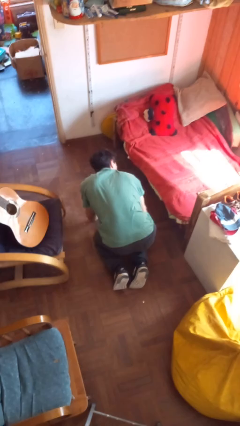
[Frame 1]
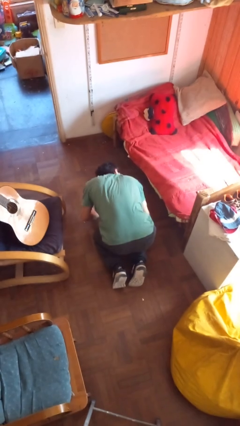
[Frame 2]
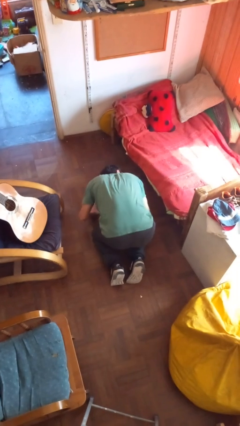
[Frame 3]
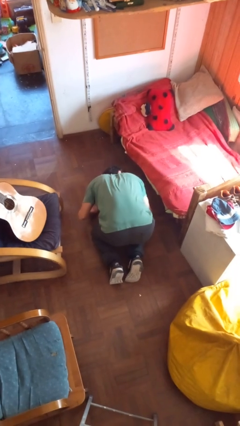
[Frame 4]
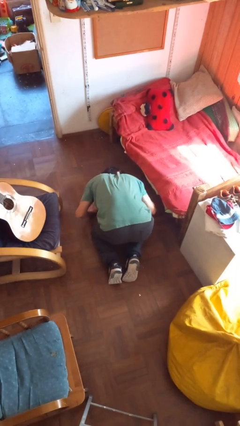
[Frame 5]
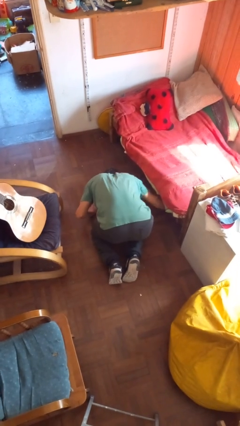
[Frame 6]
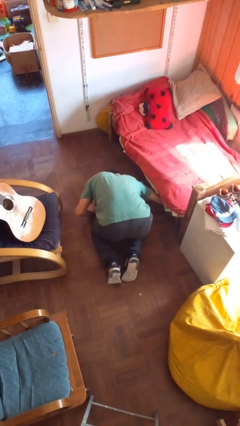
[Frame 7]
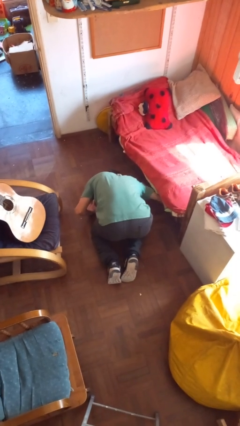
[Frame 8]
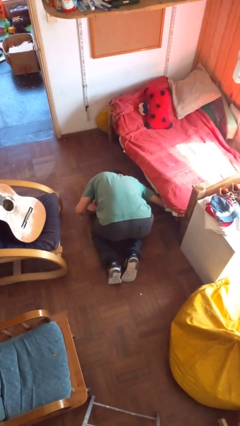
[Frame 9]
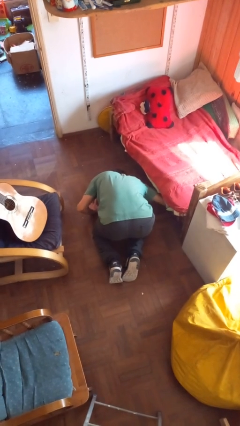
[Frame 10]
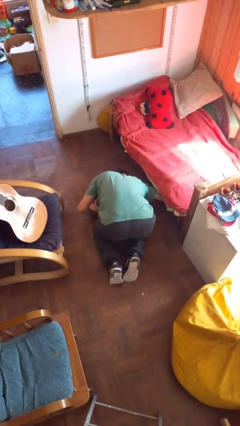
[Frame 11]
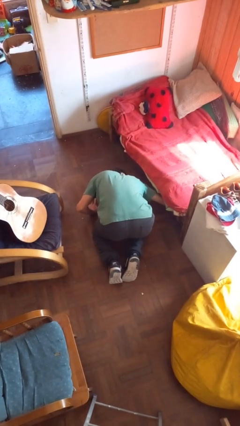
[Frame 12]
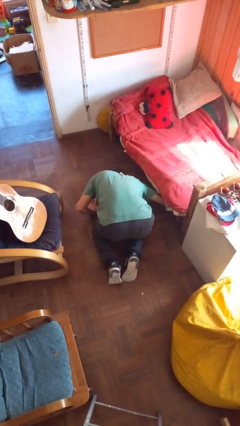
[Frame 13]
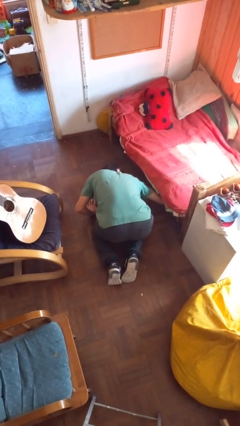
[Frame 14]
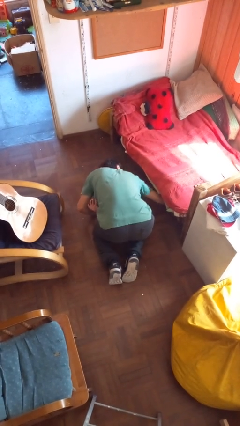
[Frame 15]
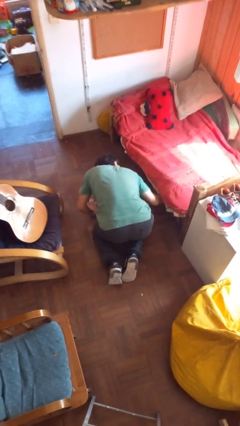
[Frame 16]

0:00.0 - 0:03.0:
person searches under bed

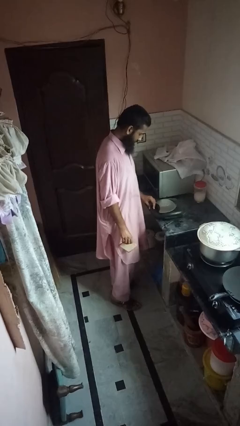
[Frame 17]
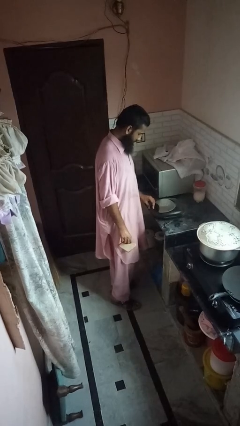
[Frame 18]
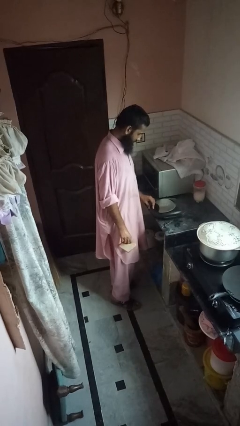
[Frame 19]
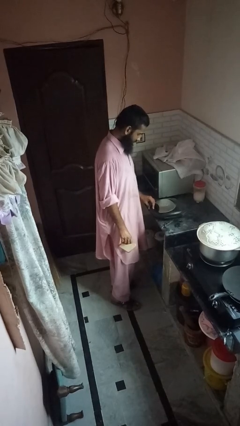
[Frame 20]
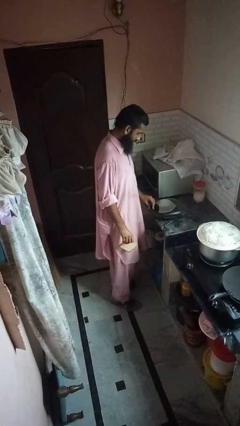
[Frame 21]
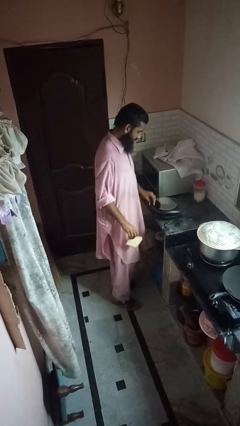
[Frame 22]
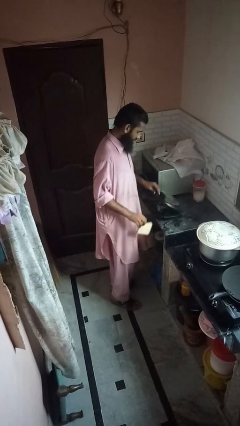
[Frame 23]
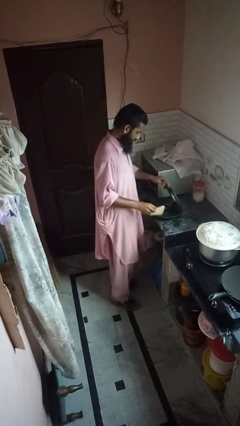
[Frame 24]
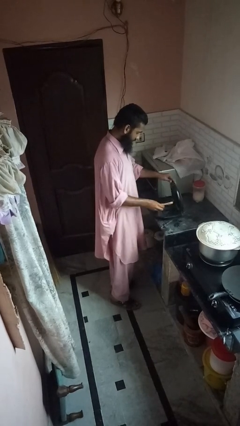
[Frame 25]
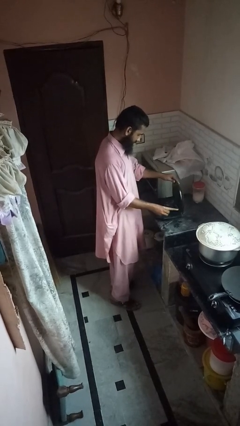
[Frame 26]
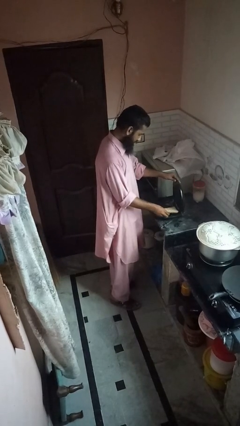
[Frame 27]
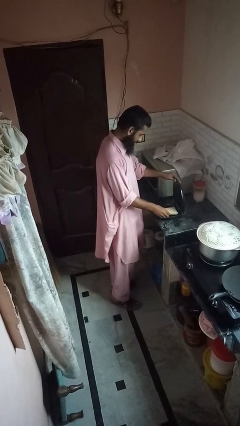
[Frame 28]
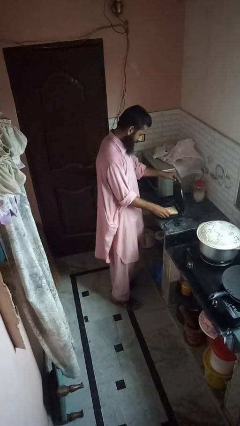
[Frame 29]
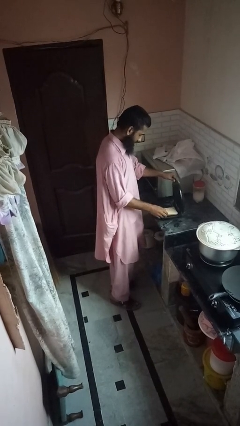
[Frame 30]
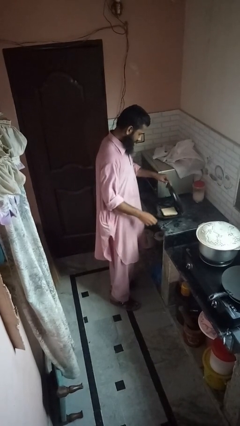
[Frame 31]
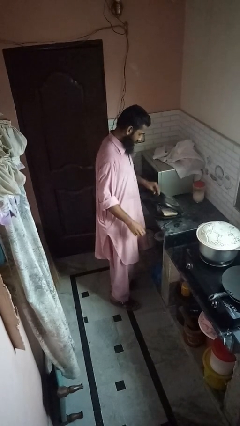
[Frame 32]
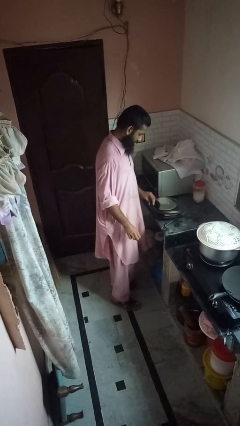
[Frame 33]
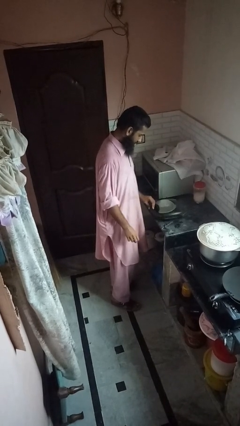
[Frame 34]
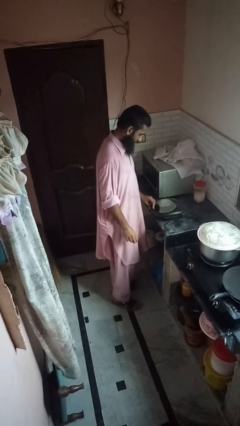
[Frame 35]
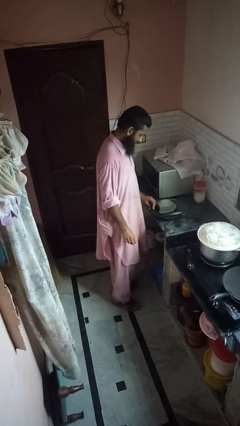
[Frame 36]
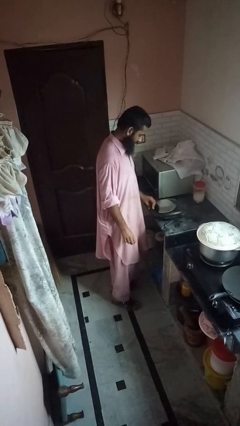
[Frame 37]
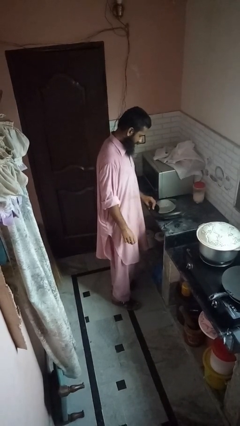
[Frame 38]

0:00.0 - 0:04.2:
person puts object into toaster

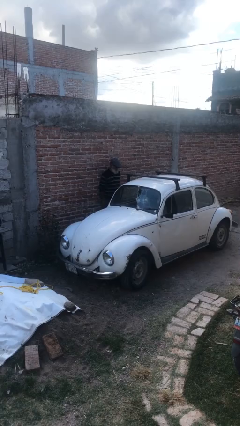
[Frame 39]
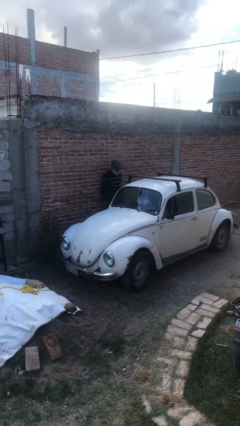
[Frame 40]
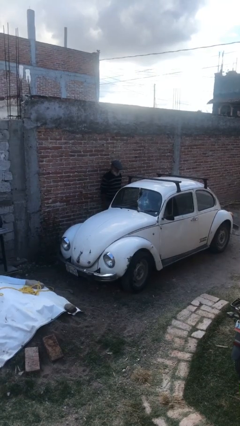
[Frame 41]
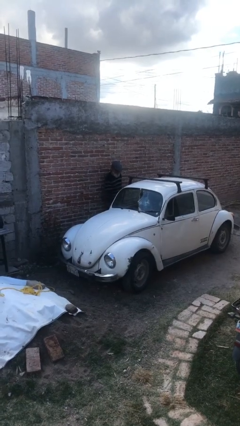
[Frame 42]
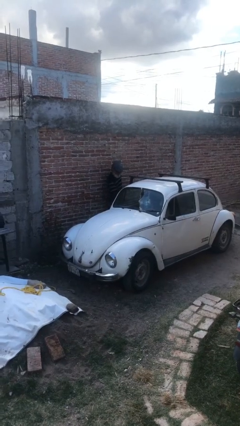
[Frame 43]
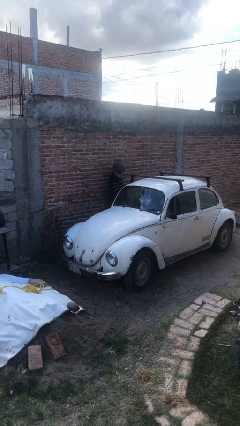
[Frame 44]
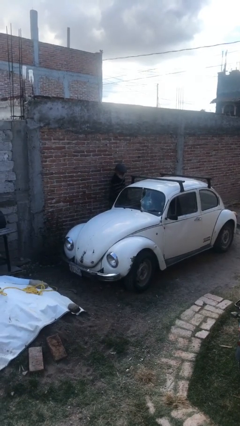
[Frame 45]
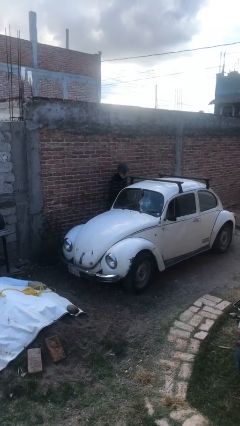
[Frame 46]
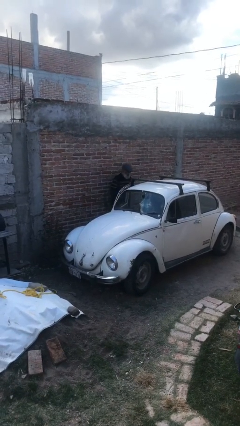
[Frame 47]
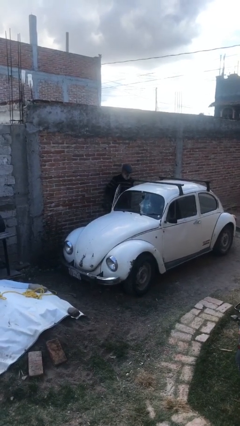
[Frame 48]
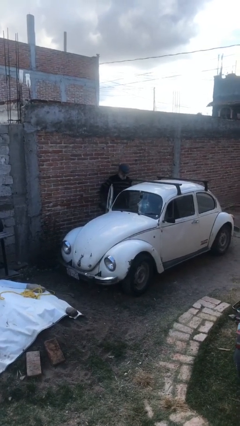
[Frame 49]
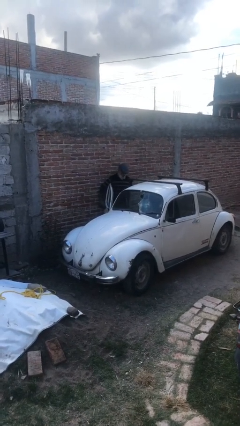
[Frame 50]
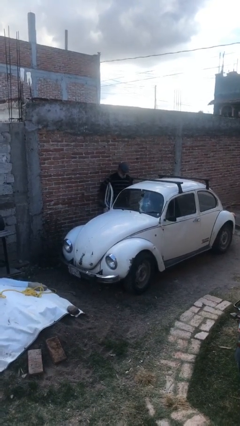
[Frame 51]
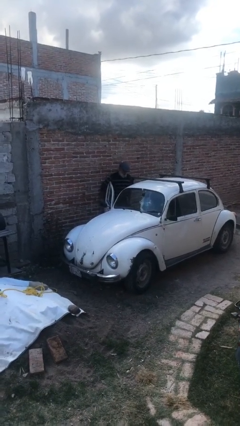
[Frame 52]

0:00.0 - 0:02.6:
person opens car door

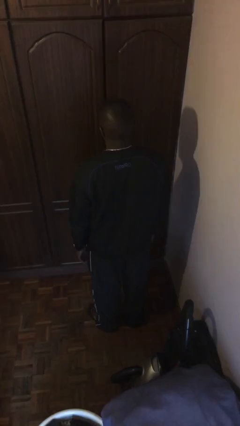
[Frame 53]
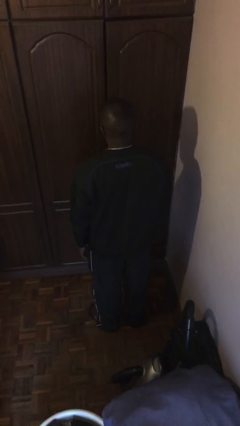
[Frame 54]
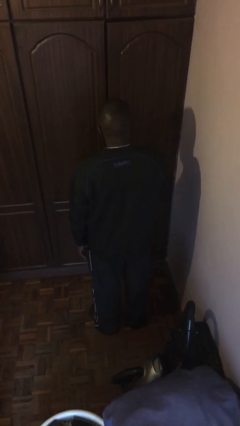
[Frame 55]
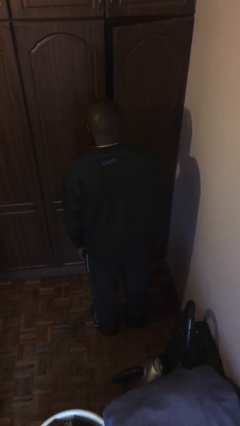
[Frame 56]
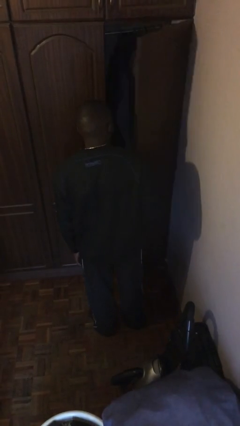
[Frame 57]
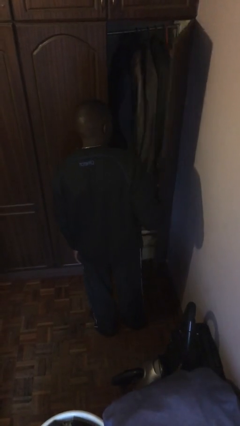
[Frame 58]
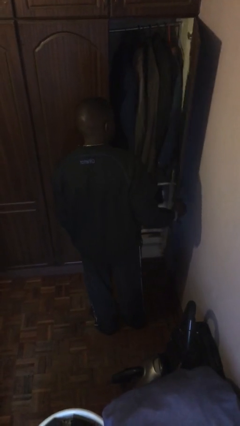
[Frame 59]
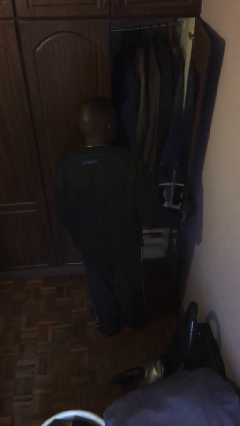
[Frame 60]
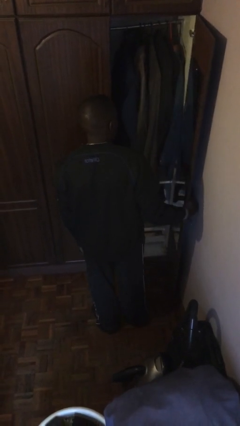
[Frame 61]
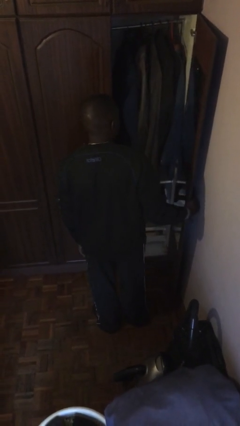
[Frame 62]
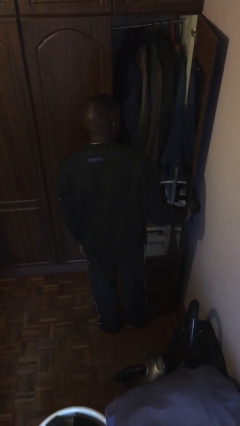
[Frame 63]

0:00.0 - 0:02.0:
person opens closet door

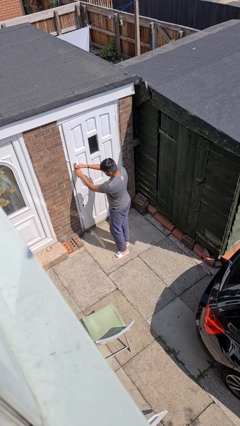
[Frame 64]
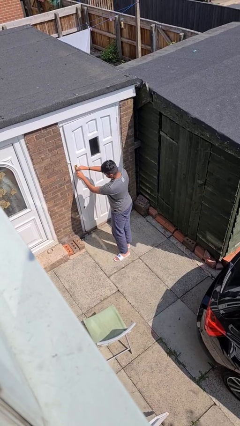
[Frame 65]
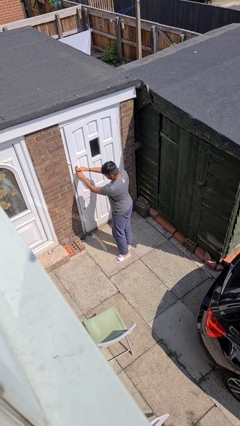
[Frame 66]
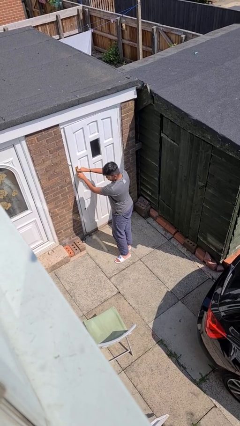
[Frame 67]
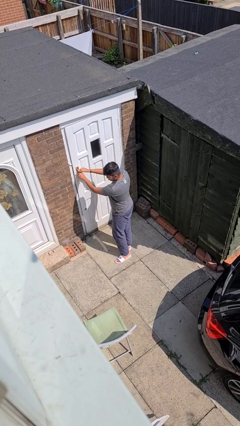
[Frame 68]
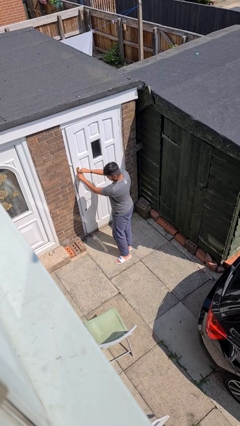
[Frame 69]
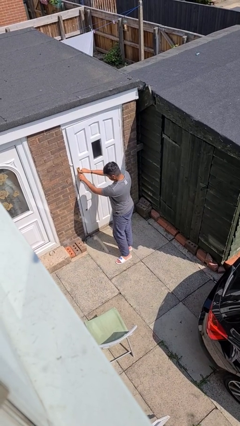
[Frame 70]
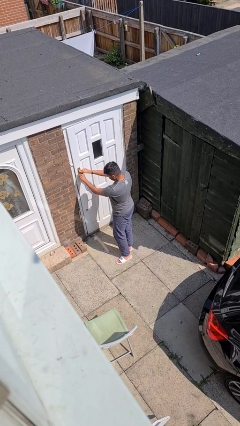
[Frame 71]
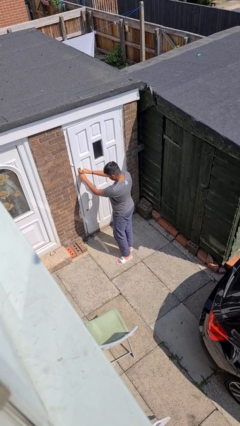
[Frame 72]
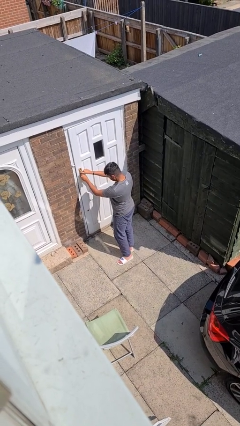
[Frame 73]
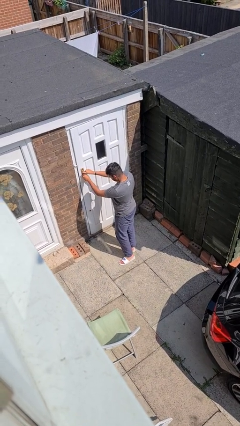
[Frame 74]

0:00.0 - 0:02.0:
person locks door with keys

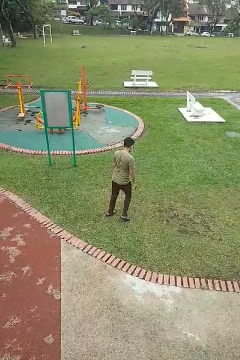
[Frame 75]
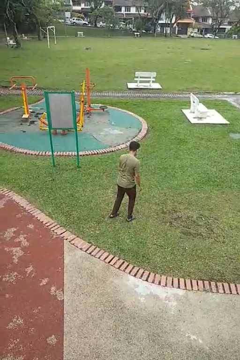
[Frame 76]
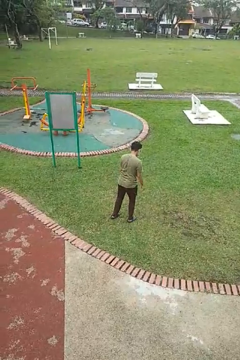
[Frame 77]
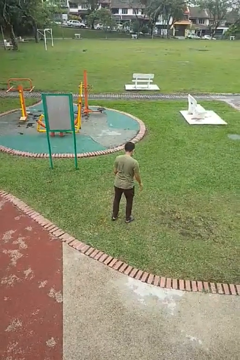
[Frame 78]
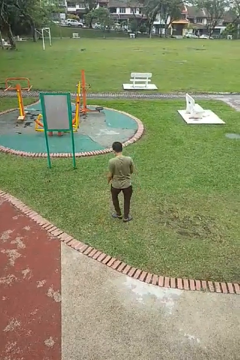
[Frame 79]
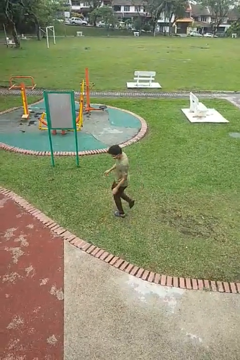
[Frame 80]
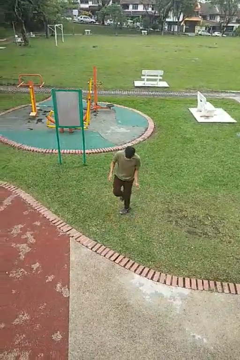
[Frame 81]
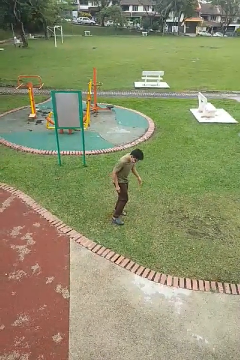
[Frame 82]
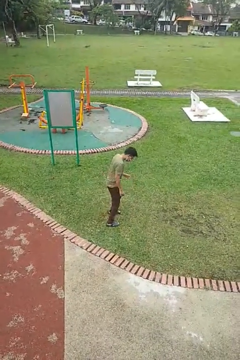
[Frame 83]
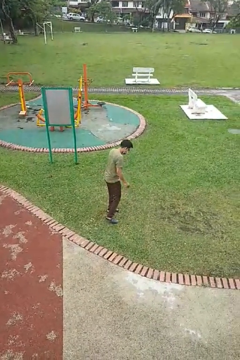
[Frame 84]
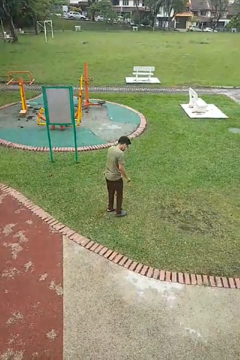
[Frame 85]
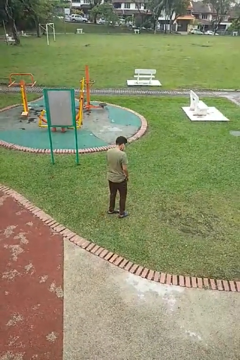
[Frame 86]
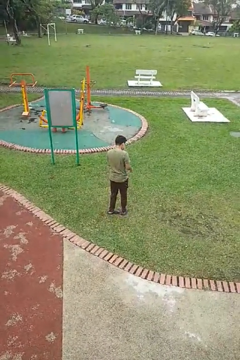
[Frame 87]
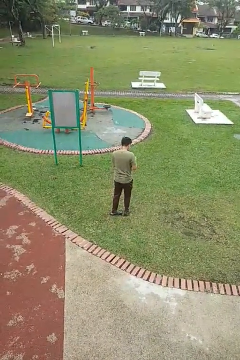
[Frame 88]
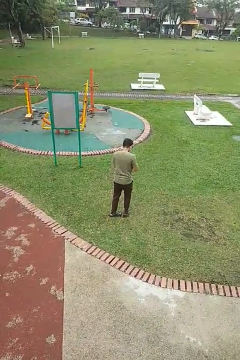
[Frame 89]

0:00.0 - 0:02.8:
person twirls

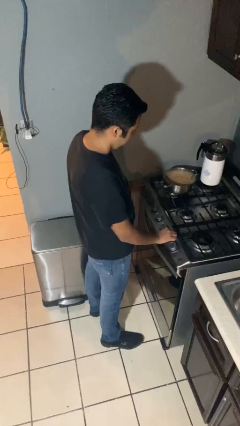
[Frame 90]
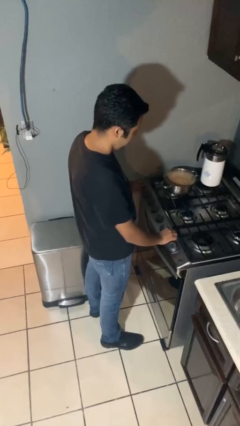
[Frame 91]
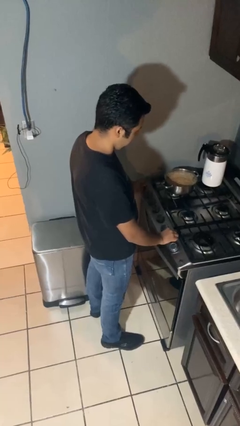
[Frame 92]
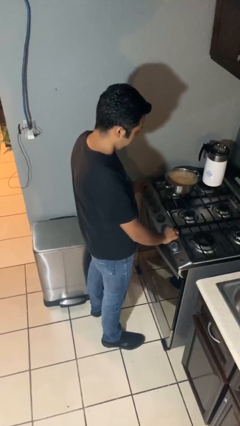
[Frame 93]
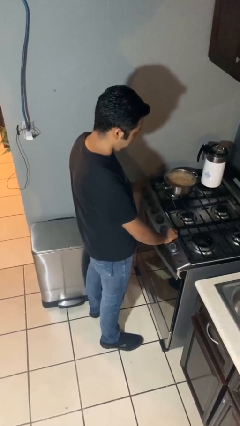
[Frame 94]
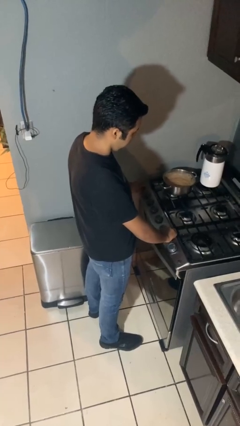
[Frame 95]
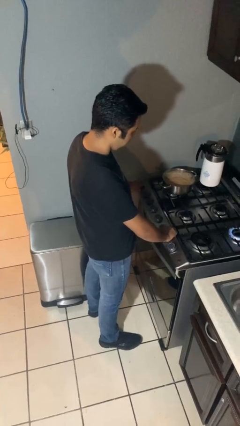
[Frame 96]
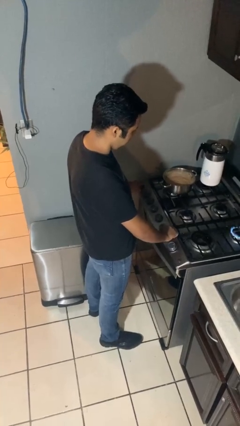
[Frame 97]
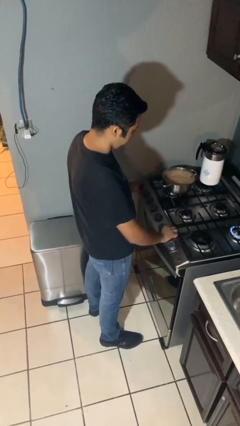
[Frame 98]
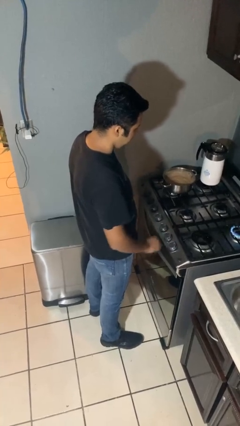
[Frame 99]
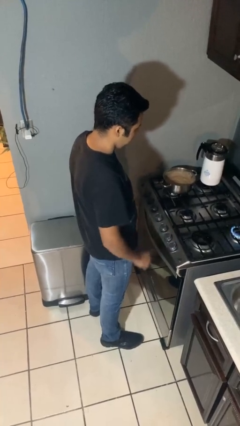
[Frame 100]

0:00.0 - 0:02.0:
person turns on stovetop
